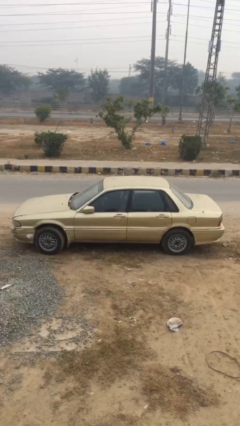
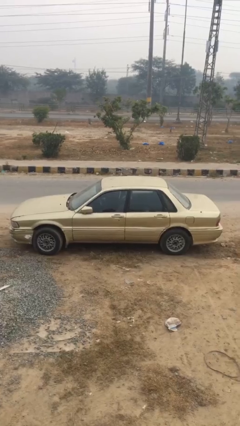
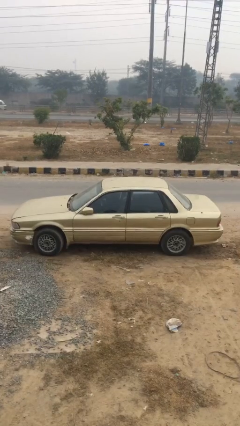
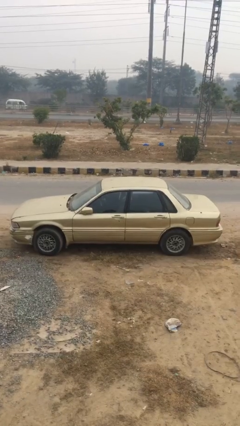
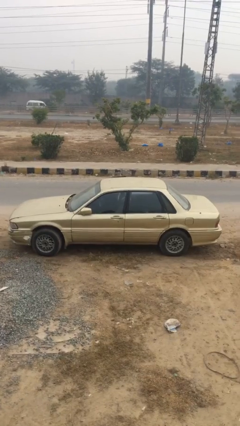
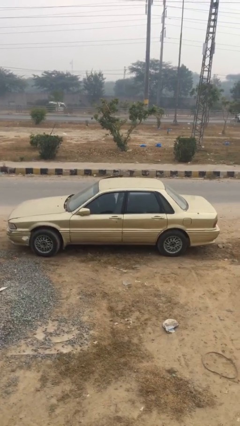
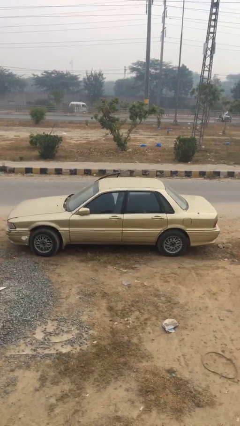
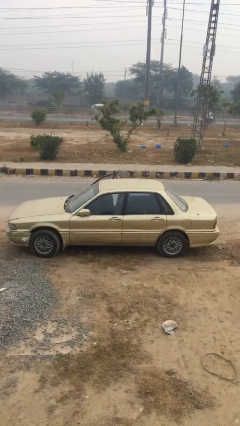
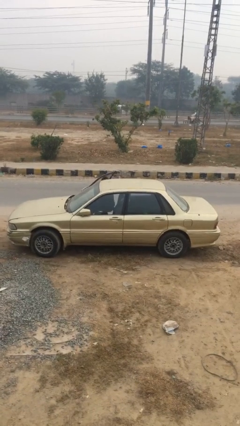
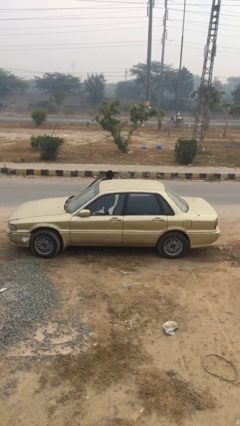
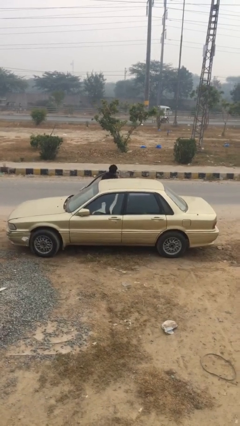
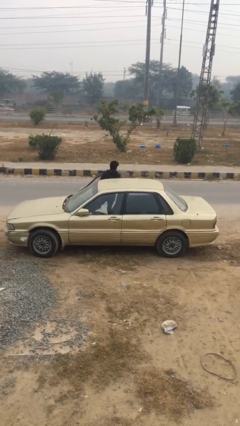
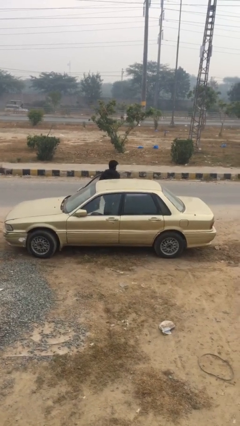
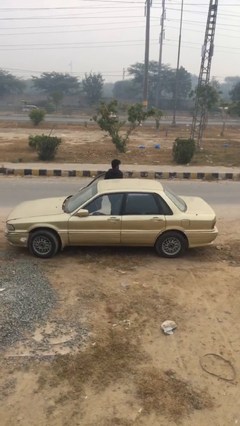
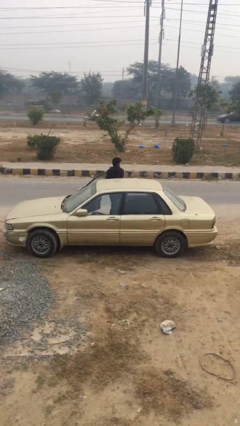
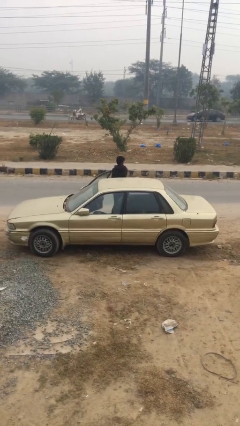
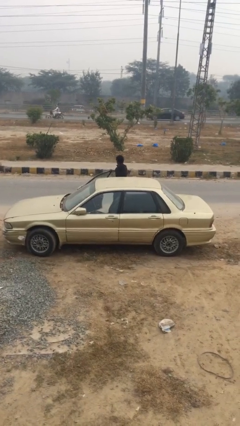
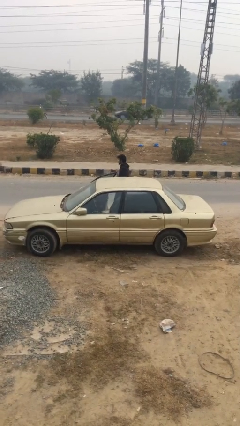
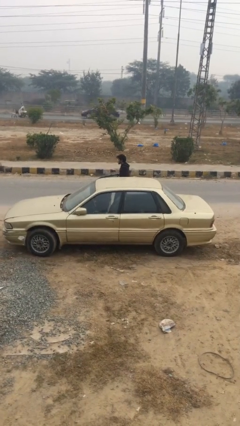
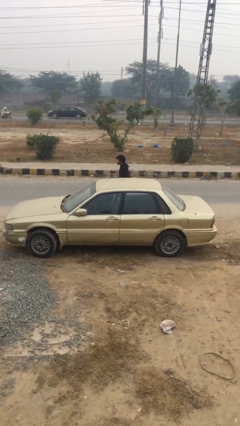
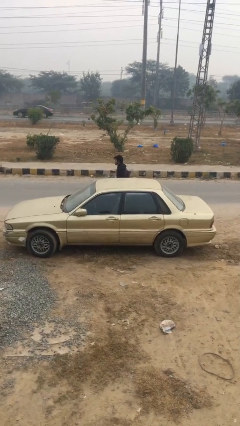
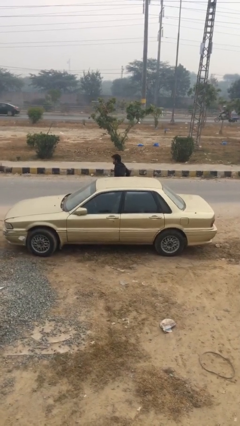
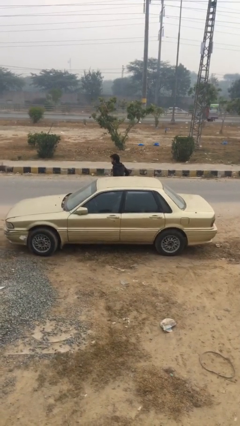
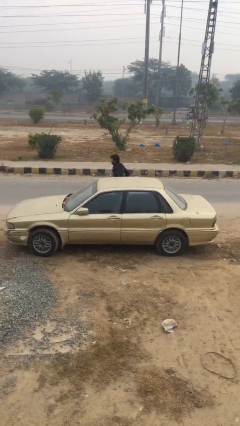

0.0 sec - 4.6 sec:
car drops off person

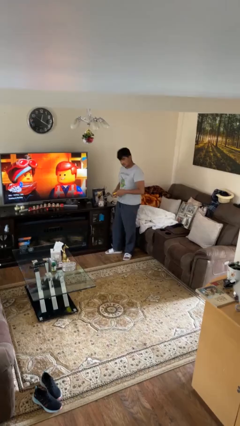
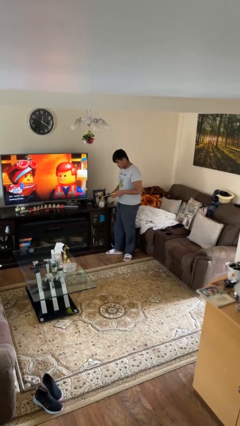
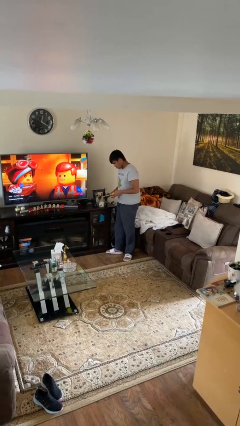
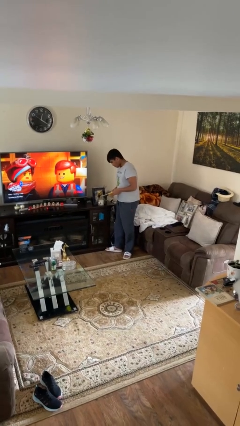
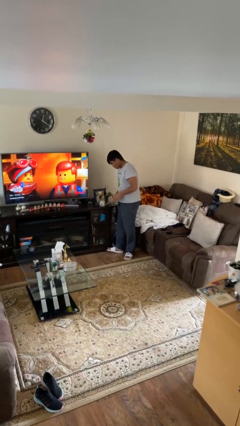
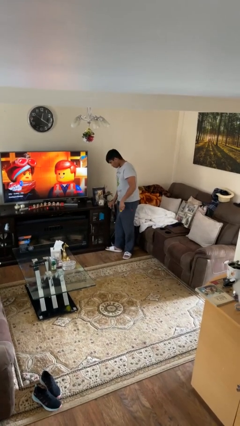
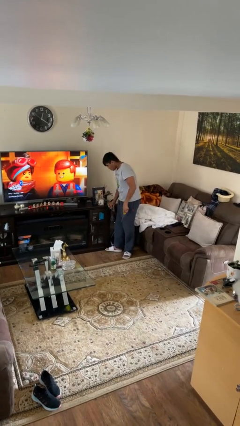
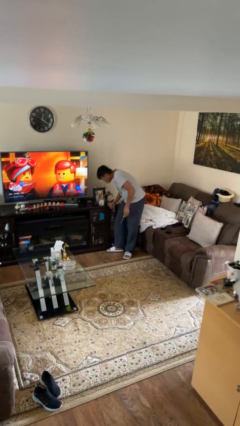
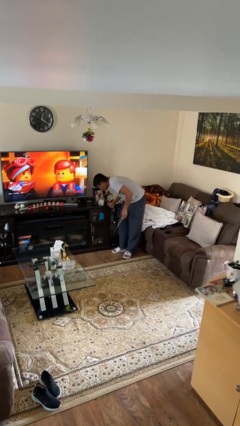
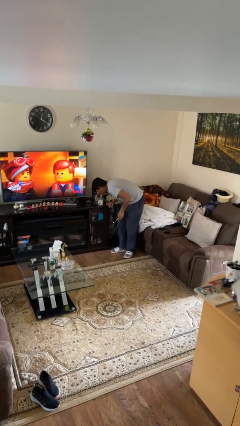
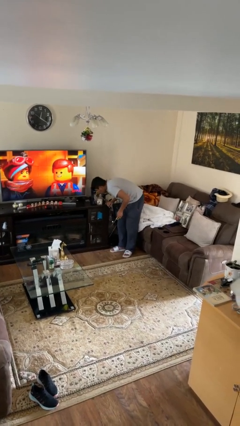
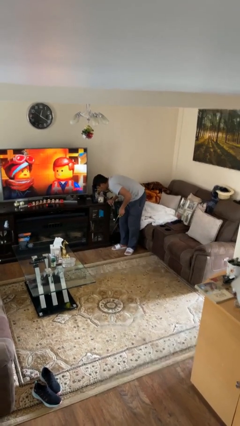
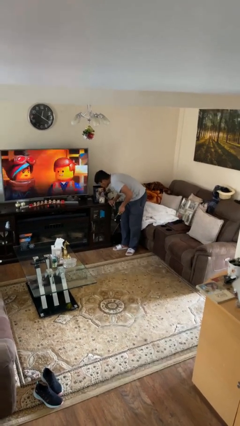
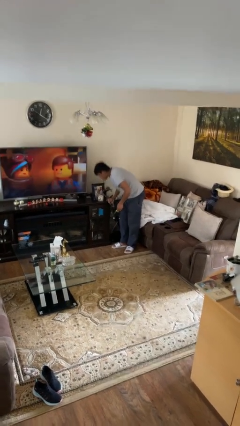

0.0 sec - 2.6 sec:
person extinguishes candle

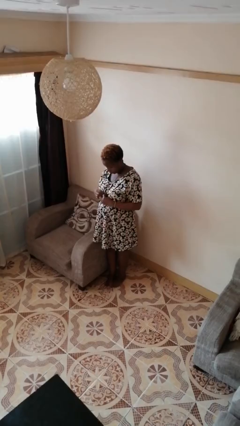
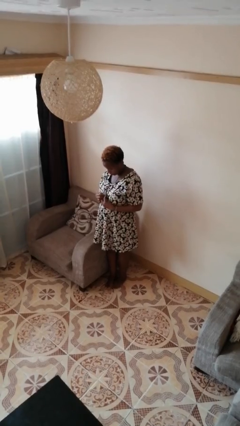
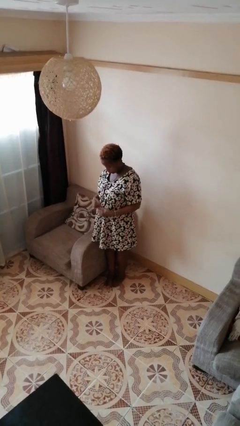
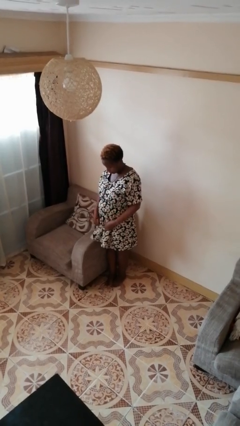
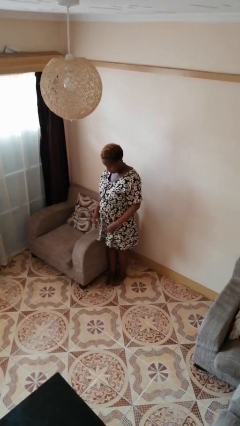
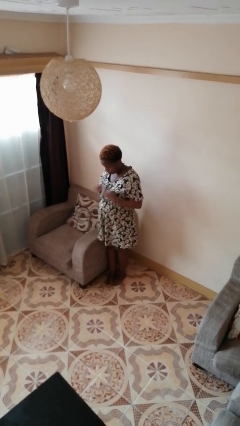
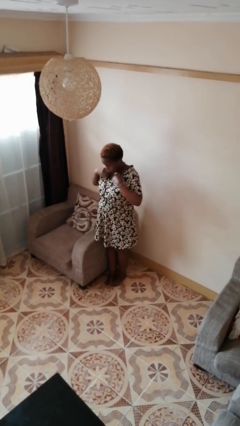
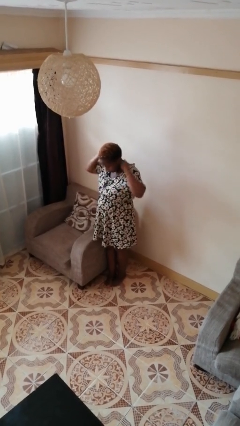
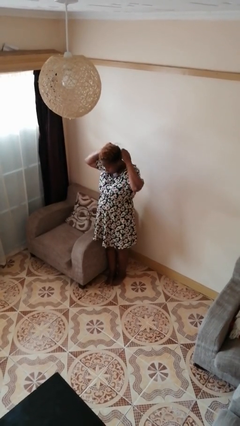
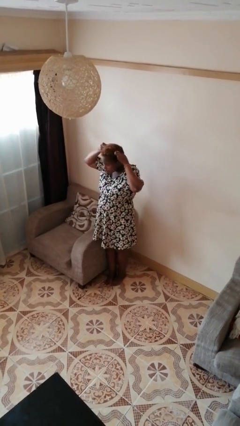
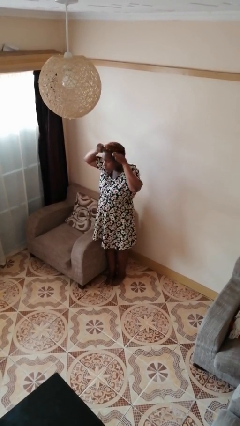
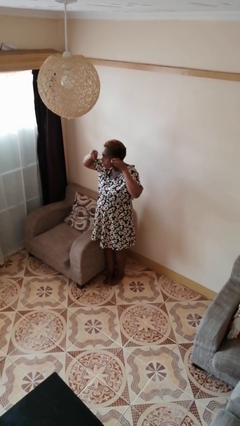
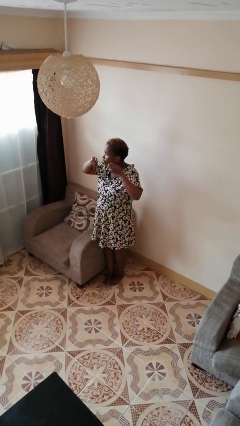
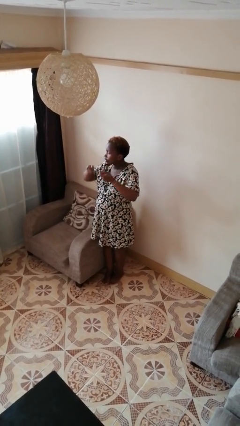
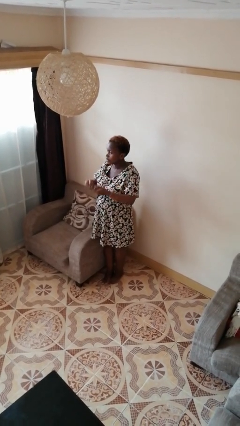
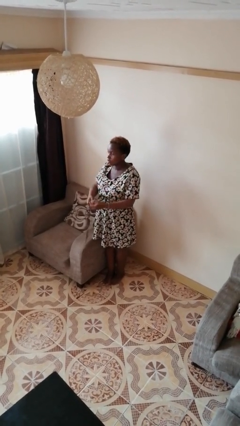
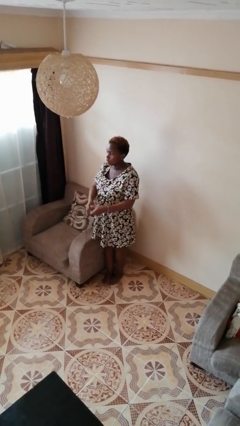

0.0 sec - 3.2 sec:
person takes off necklace

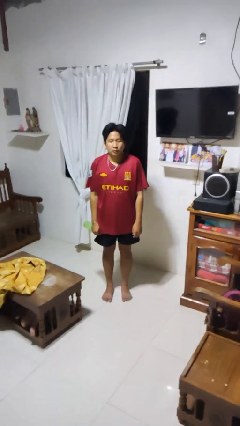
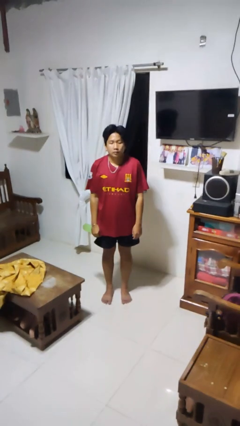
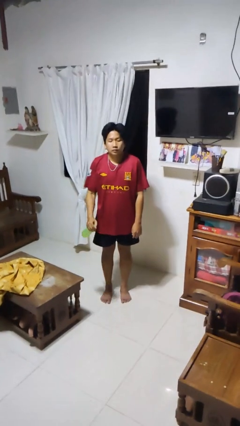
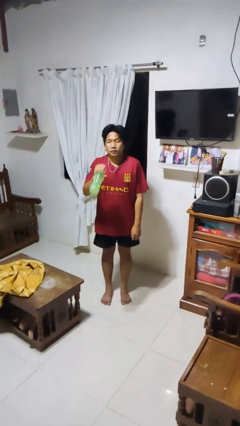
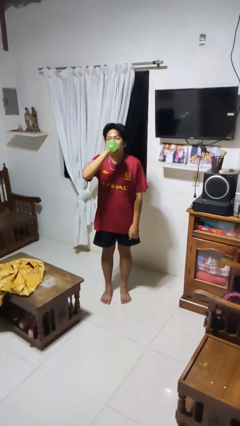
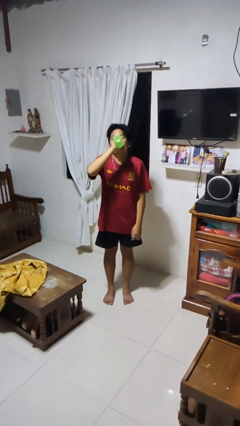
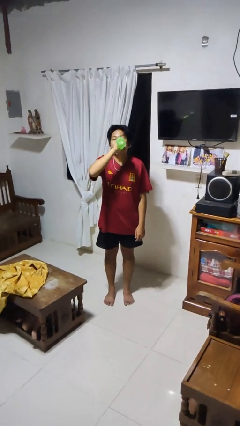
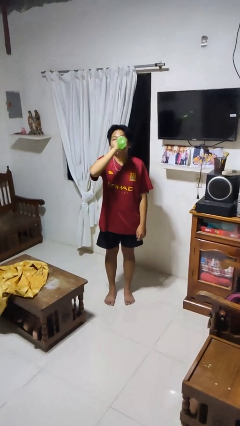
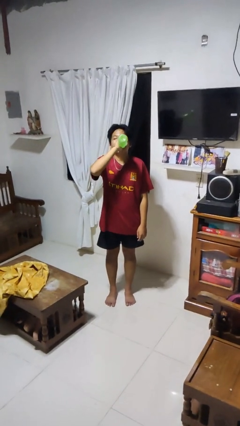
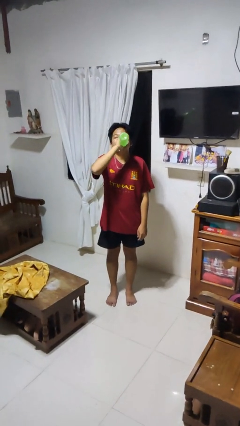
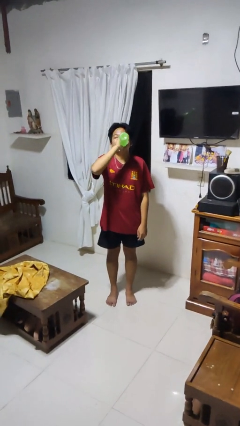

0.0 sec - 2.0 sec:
person drinks from bottle

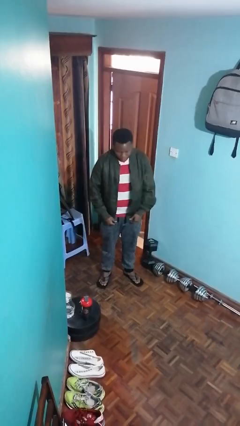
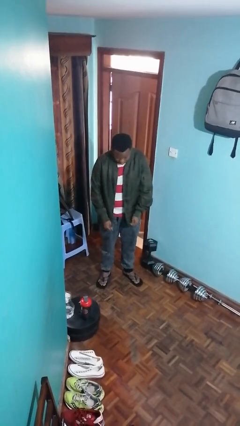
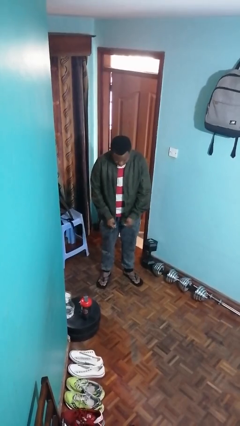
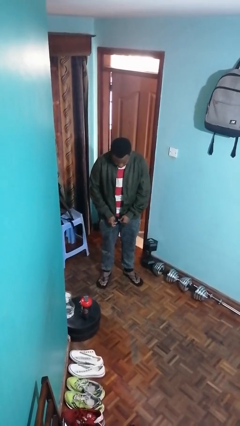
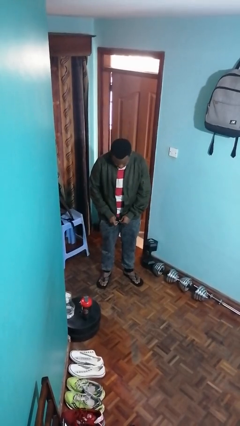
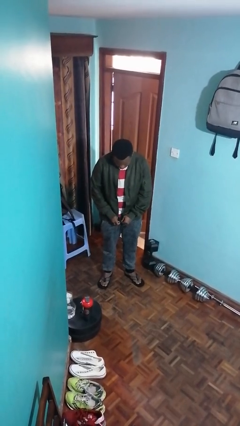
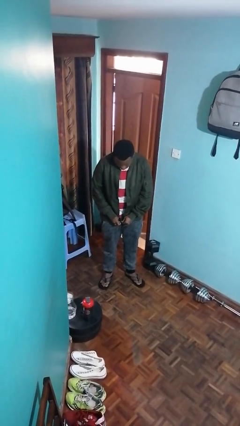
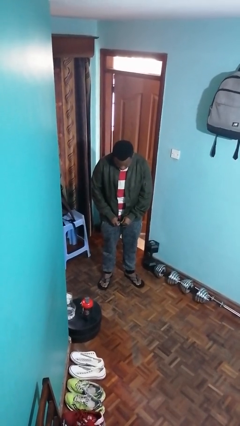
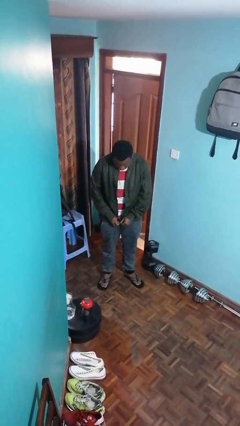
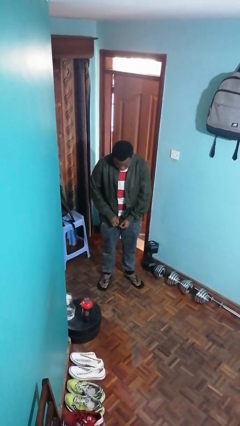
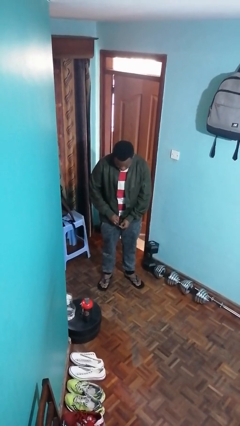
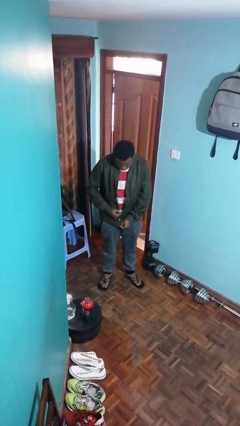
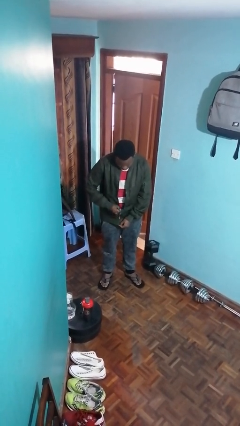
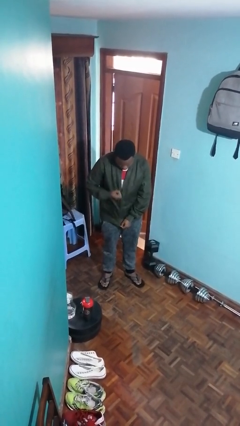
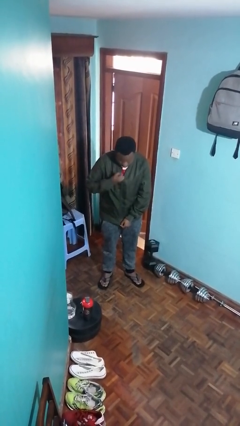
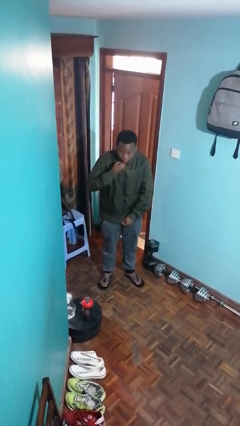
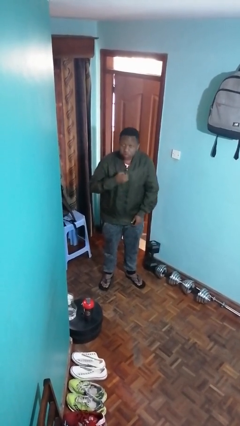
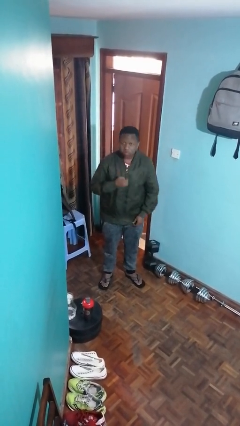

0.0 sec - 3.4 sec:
person zips up jacket

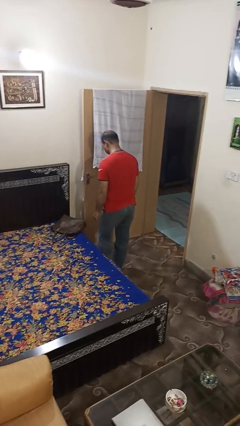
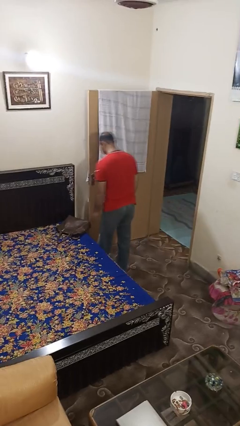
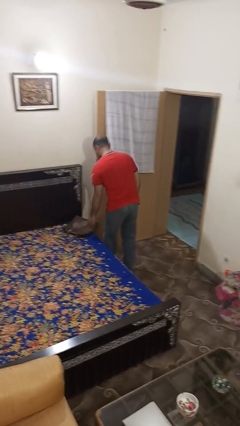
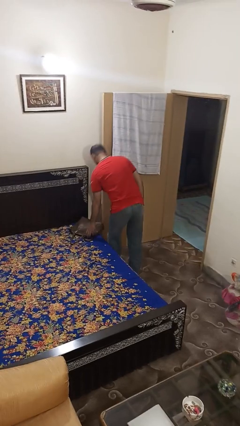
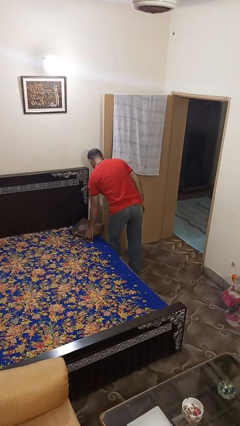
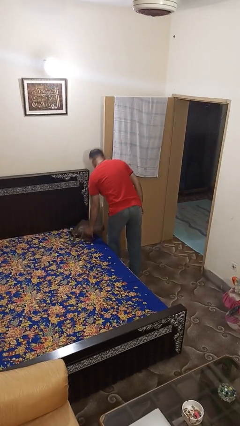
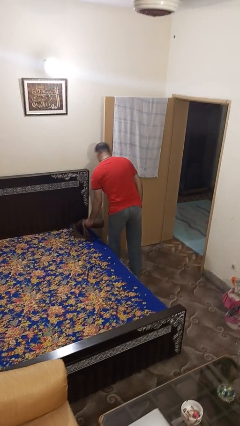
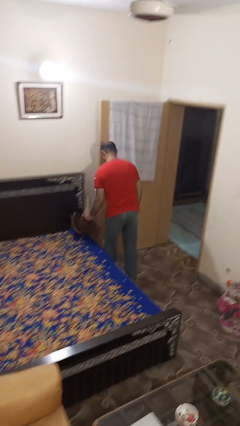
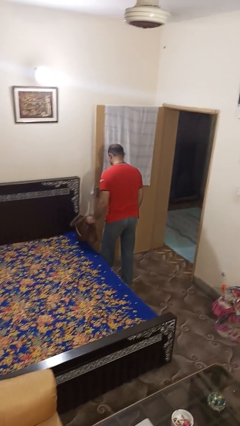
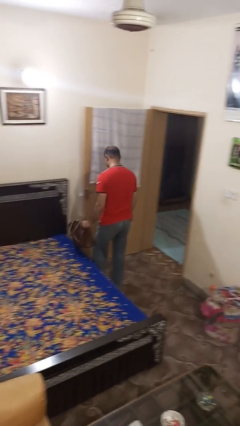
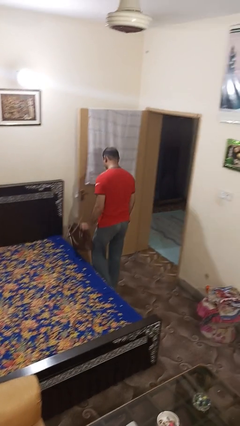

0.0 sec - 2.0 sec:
person picks up object from bed
